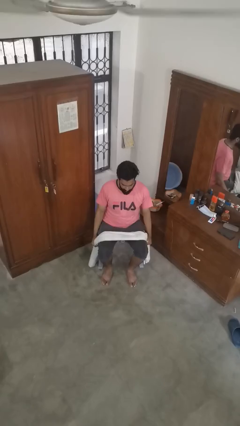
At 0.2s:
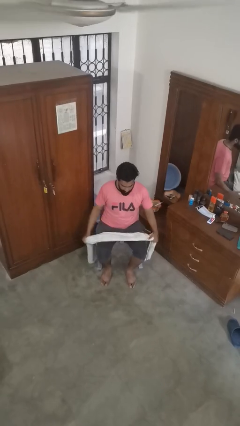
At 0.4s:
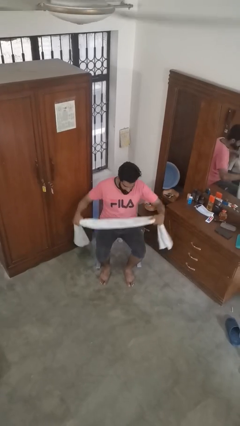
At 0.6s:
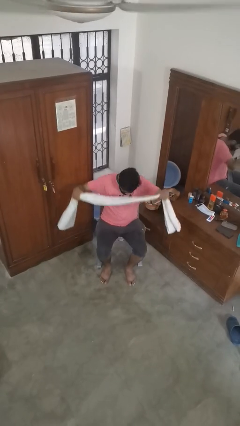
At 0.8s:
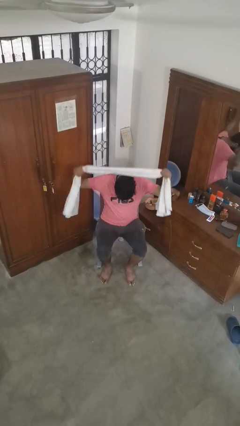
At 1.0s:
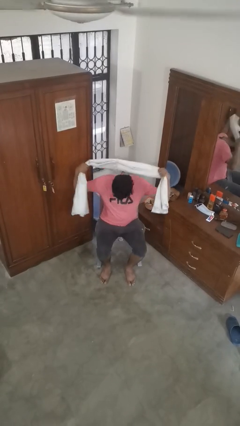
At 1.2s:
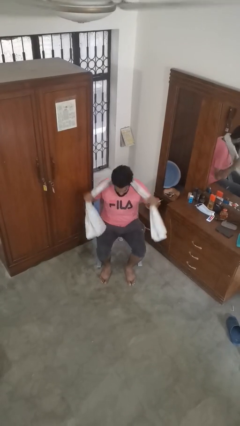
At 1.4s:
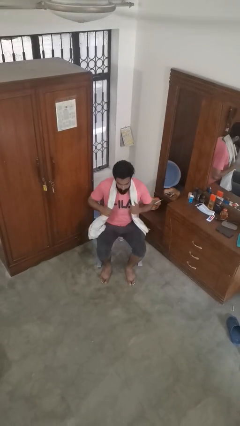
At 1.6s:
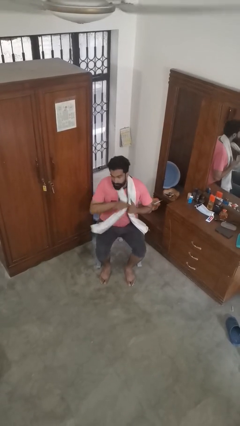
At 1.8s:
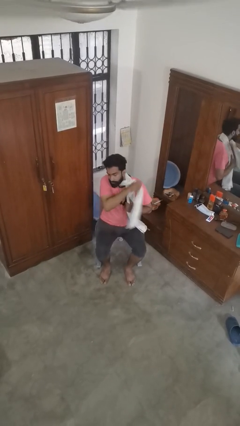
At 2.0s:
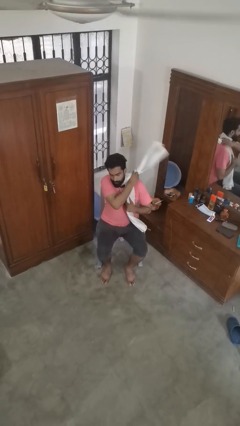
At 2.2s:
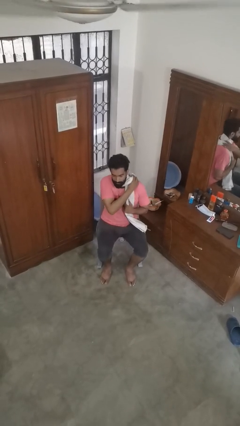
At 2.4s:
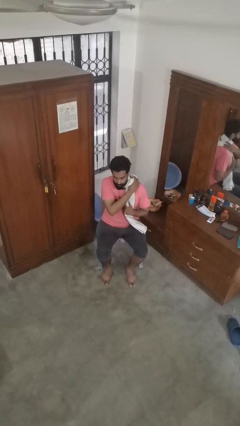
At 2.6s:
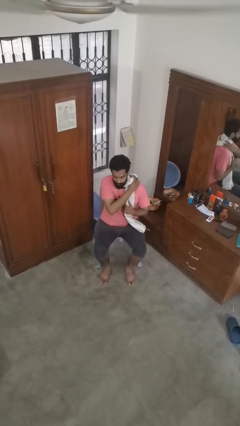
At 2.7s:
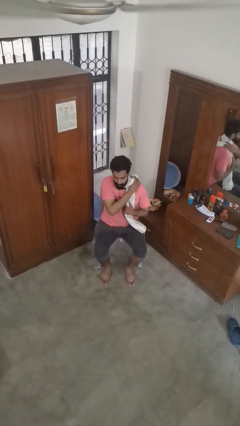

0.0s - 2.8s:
person puts on scarf

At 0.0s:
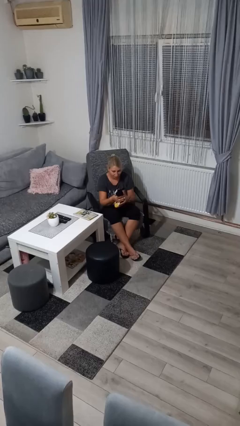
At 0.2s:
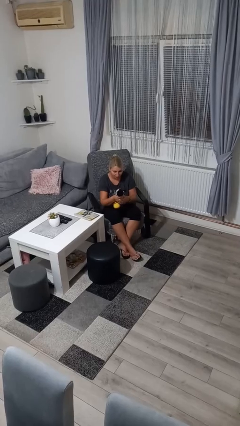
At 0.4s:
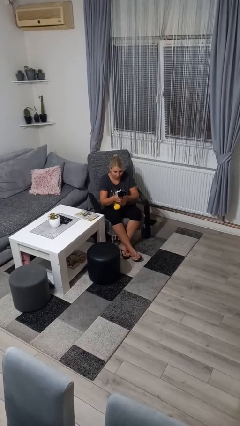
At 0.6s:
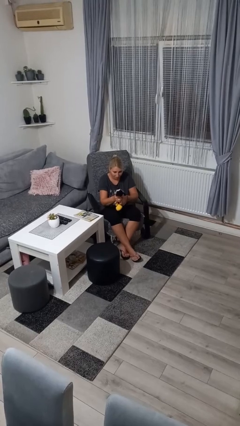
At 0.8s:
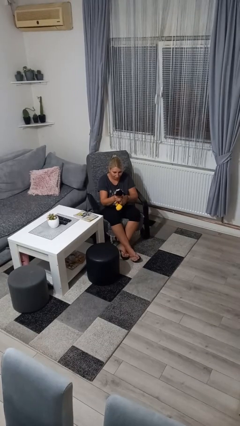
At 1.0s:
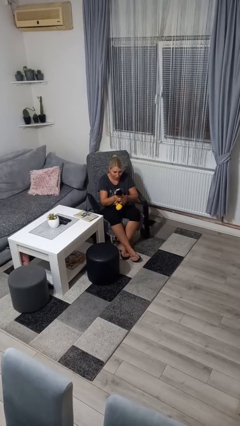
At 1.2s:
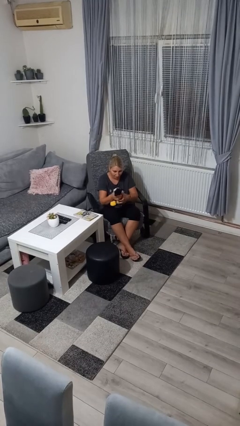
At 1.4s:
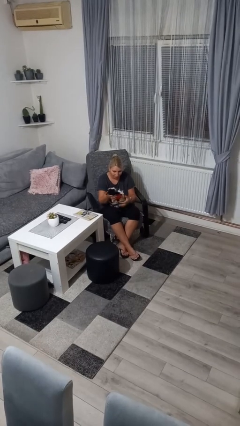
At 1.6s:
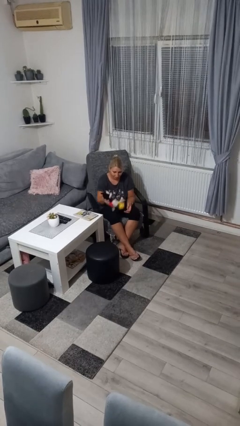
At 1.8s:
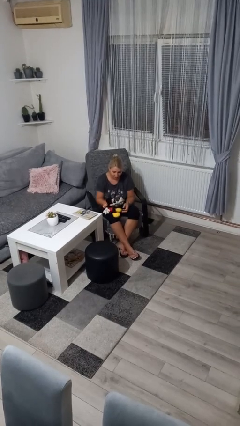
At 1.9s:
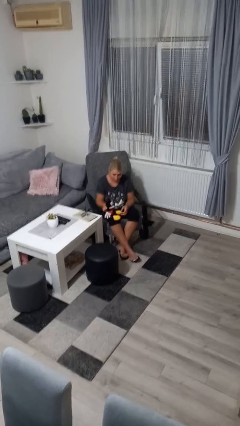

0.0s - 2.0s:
person squeezes object

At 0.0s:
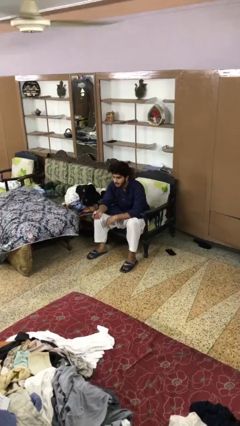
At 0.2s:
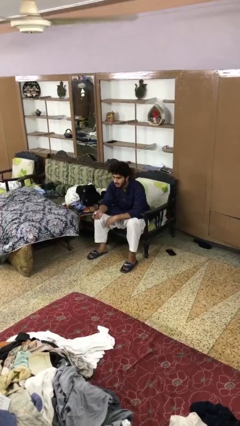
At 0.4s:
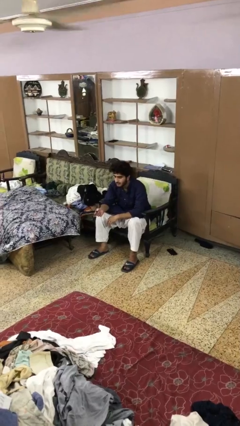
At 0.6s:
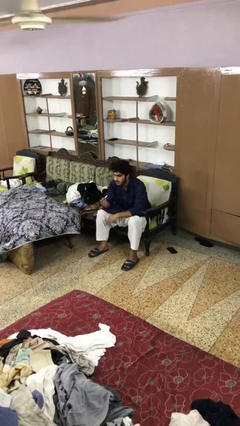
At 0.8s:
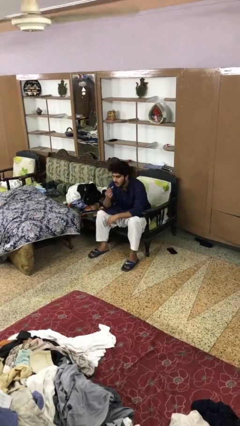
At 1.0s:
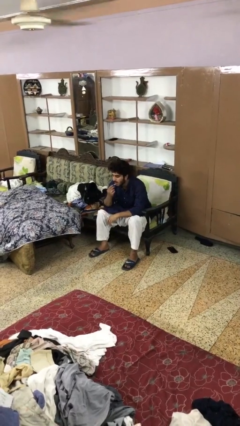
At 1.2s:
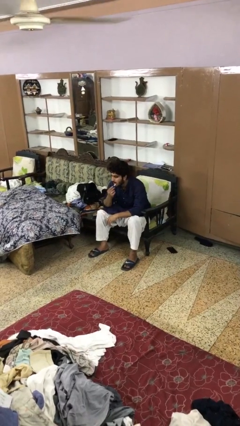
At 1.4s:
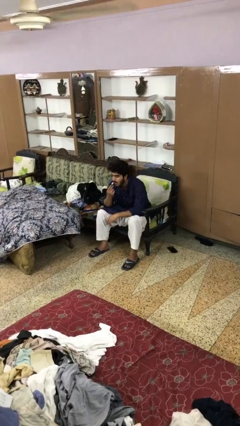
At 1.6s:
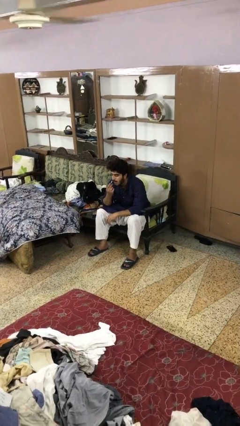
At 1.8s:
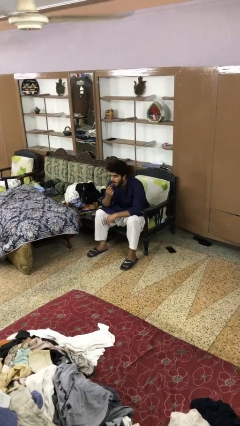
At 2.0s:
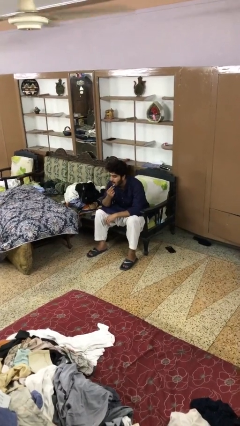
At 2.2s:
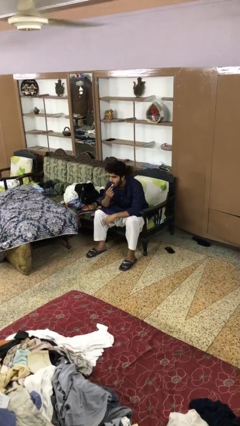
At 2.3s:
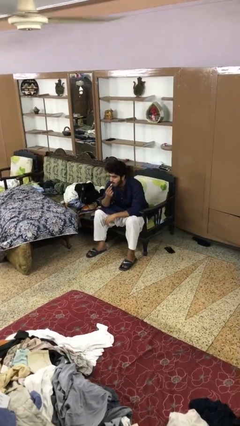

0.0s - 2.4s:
person applies lip makeup

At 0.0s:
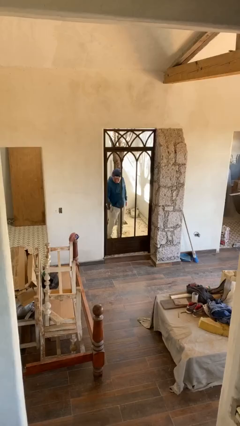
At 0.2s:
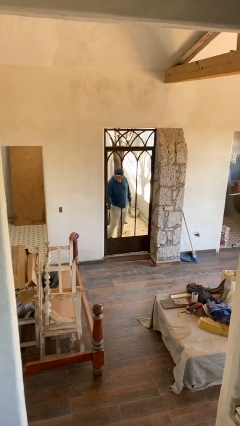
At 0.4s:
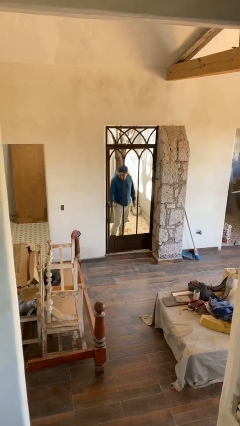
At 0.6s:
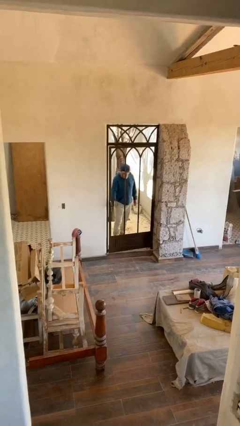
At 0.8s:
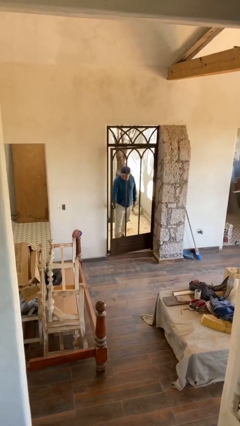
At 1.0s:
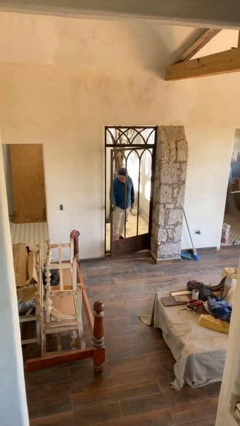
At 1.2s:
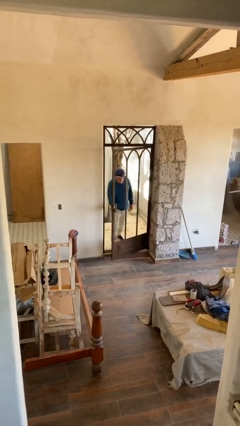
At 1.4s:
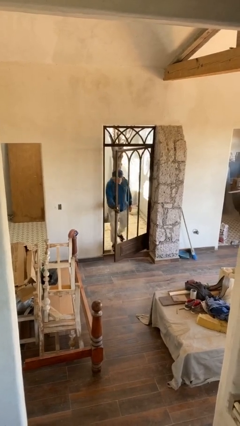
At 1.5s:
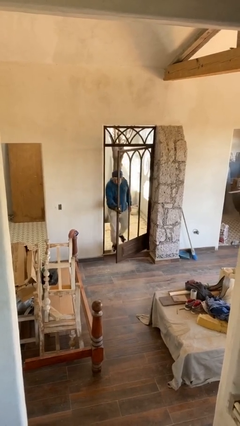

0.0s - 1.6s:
person opens facility door

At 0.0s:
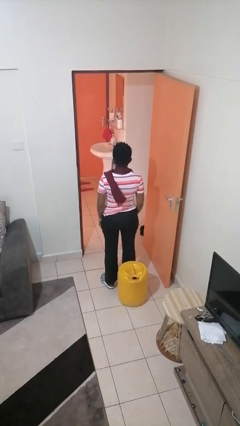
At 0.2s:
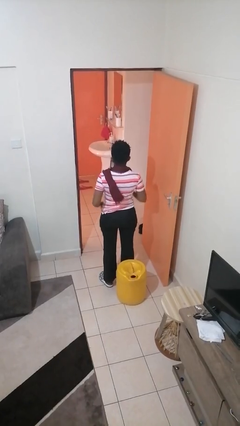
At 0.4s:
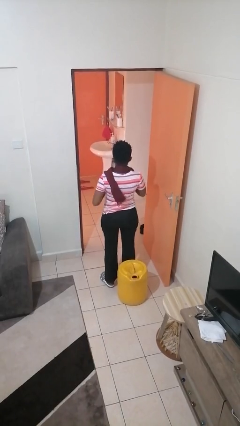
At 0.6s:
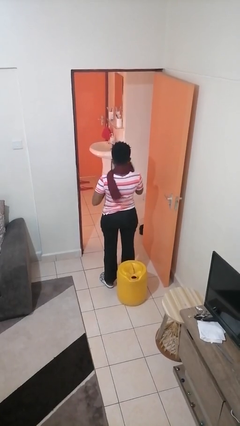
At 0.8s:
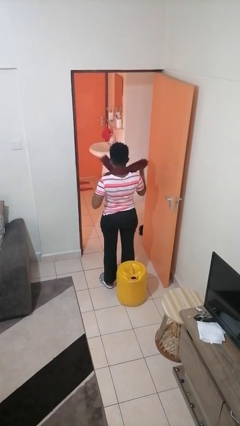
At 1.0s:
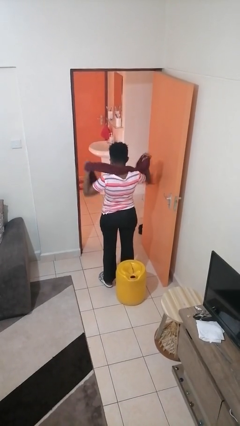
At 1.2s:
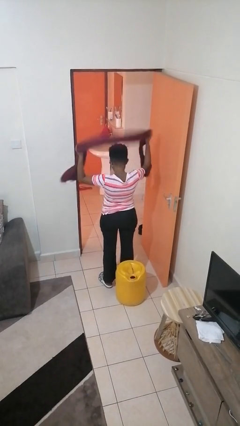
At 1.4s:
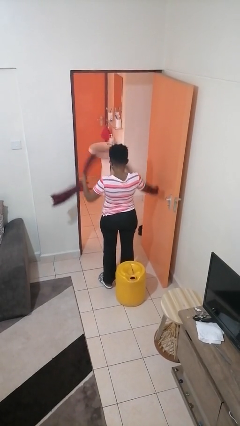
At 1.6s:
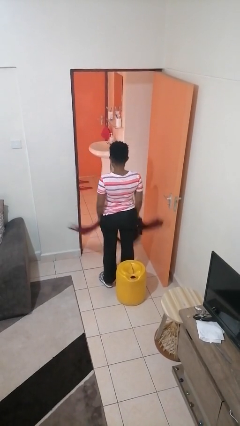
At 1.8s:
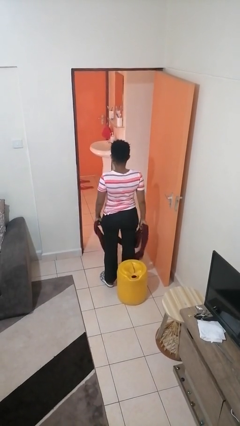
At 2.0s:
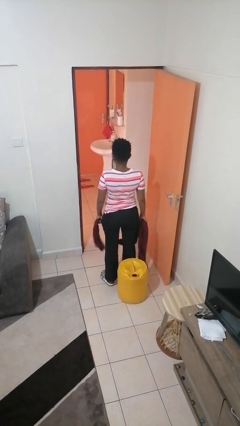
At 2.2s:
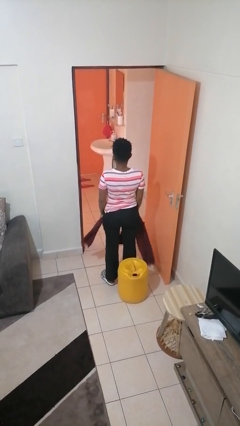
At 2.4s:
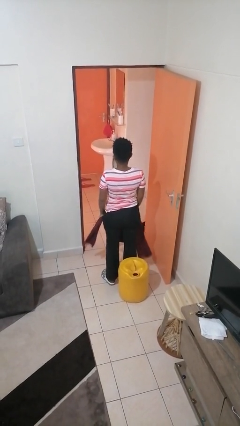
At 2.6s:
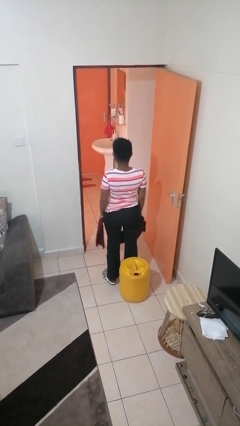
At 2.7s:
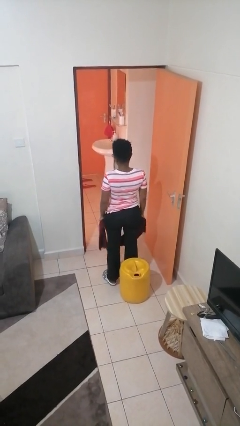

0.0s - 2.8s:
person takes off scarf

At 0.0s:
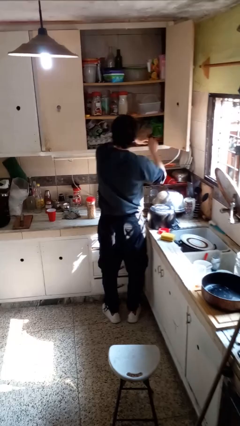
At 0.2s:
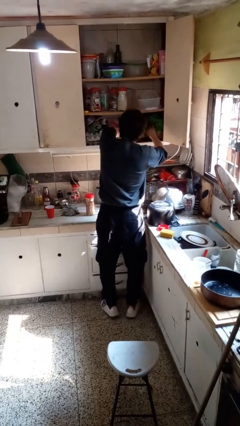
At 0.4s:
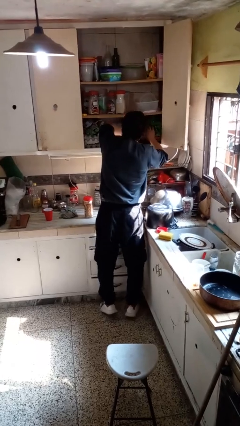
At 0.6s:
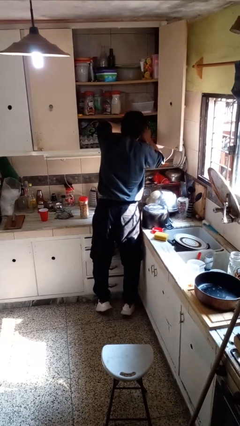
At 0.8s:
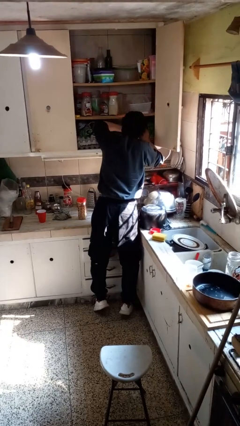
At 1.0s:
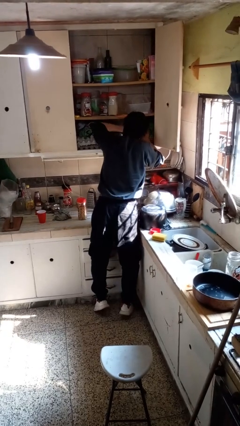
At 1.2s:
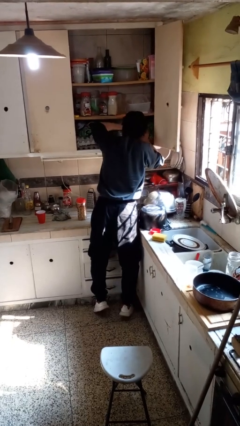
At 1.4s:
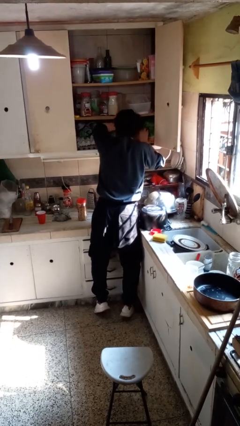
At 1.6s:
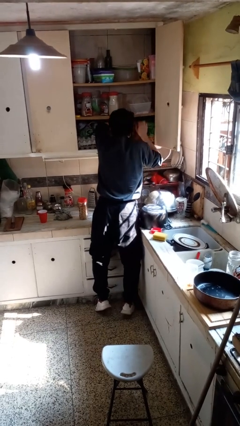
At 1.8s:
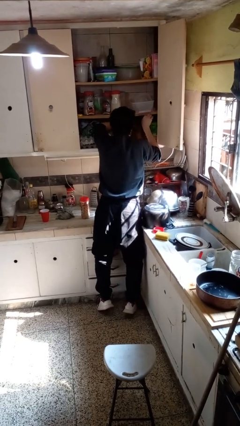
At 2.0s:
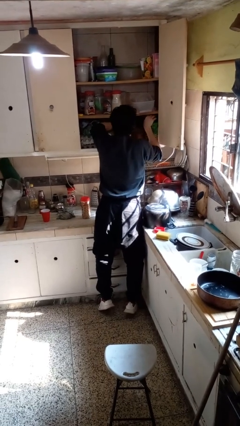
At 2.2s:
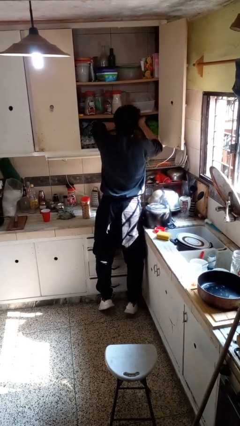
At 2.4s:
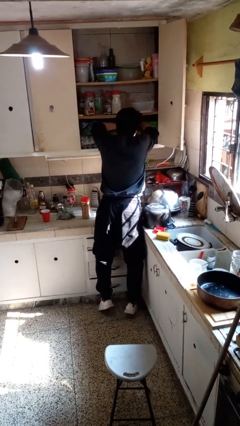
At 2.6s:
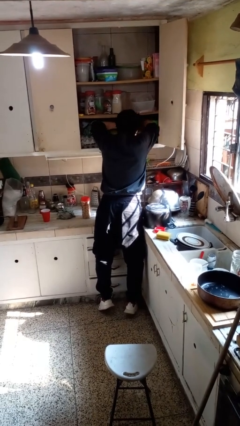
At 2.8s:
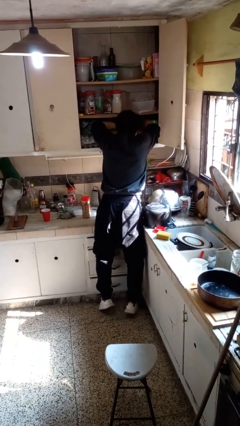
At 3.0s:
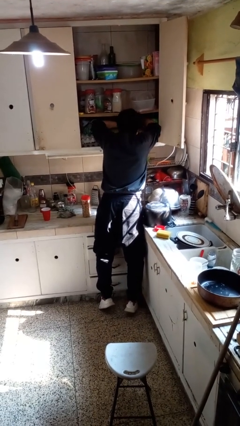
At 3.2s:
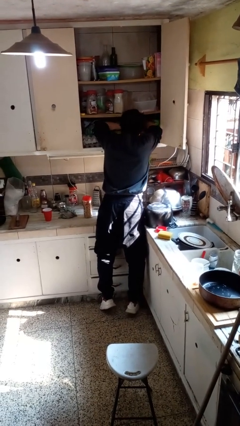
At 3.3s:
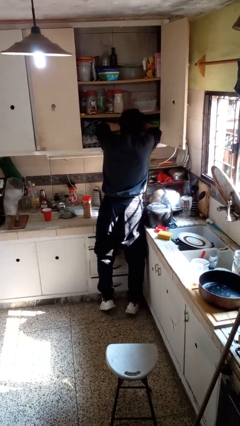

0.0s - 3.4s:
person searches in cabinet

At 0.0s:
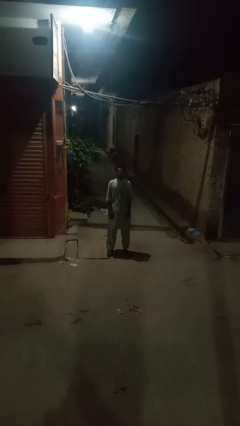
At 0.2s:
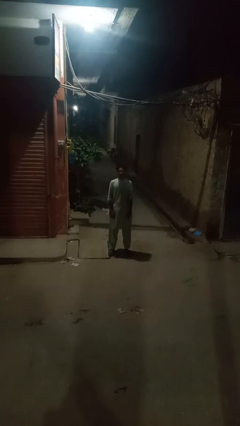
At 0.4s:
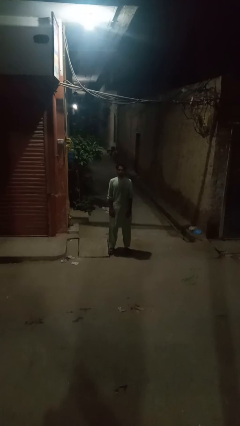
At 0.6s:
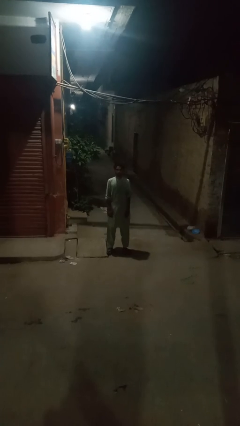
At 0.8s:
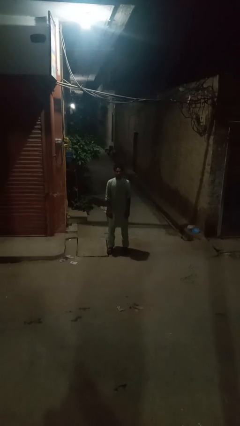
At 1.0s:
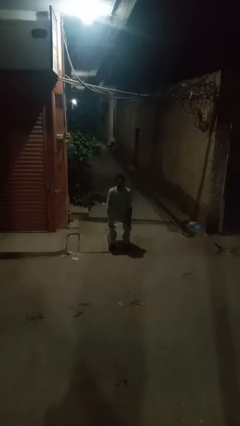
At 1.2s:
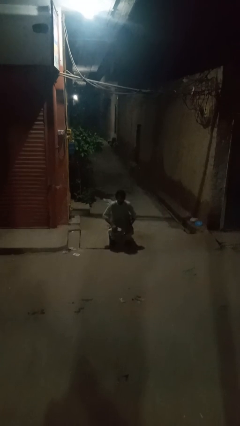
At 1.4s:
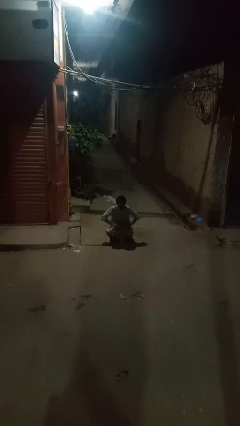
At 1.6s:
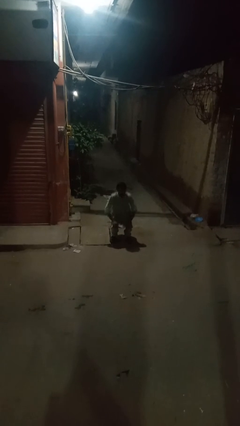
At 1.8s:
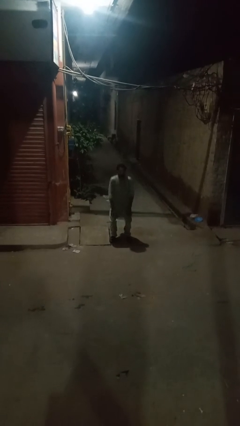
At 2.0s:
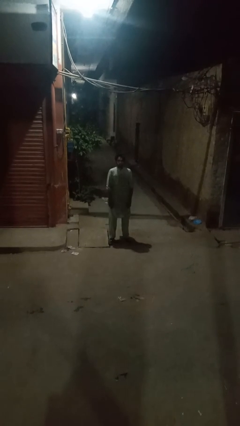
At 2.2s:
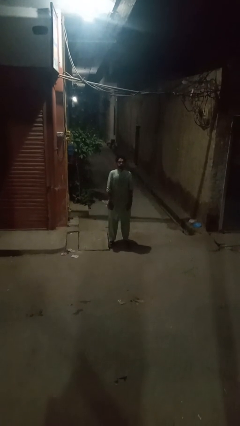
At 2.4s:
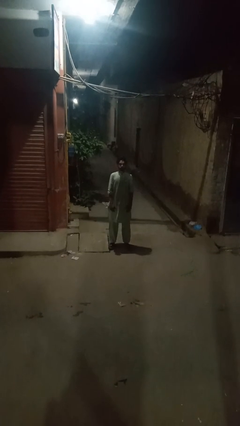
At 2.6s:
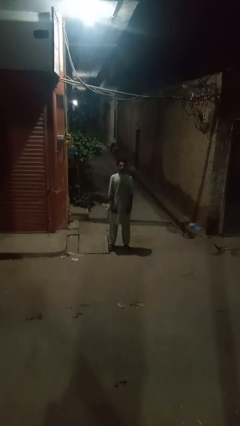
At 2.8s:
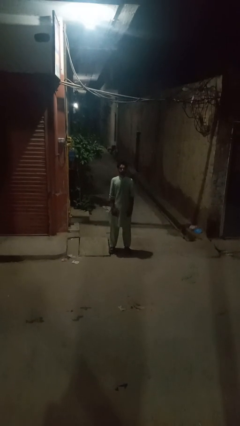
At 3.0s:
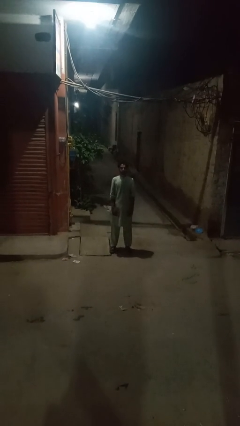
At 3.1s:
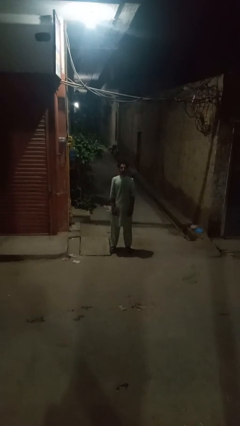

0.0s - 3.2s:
person exercises with situp
